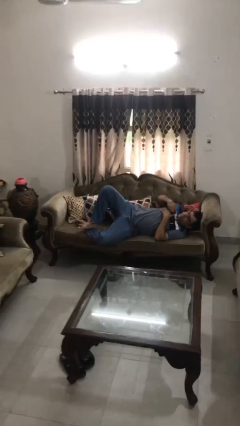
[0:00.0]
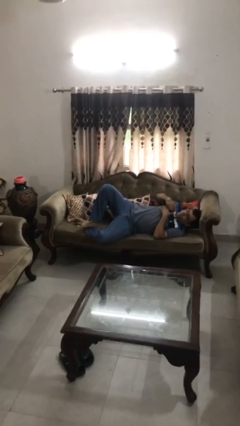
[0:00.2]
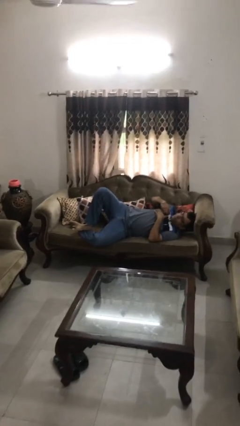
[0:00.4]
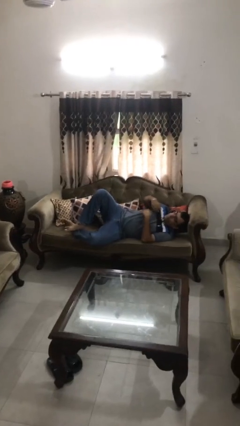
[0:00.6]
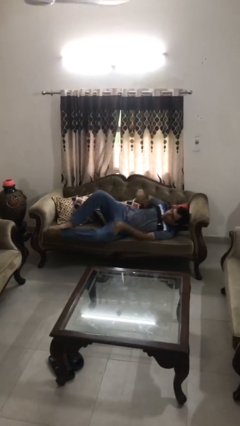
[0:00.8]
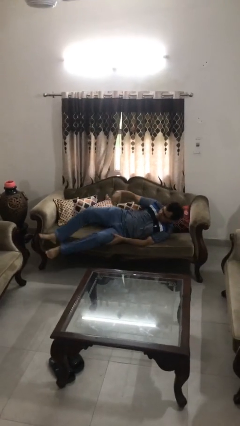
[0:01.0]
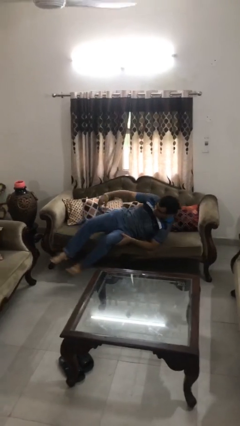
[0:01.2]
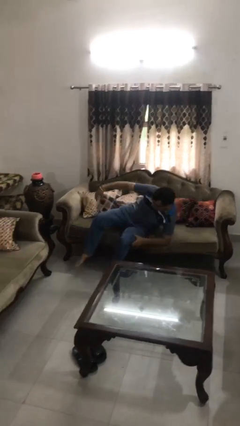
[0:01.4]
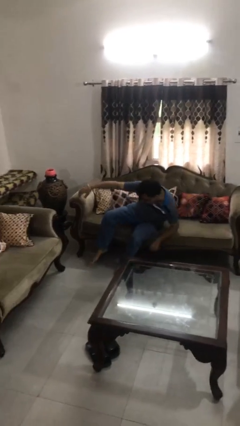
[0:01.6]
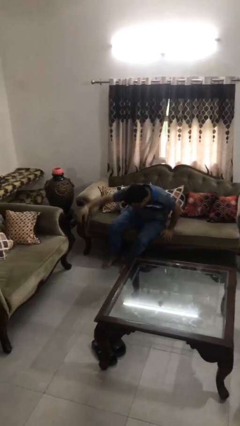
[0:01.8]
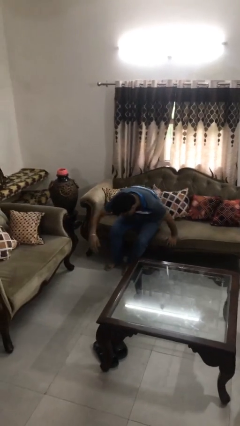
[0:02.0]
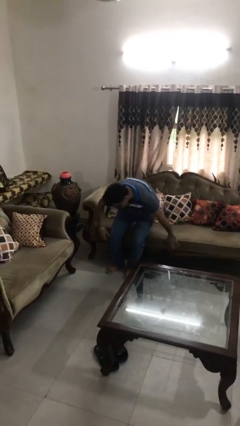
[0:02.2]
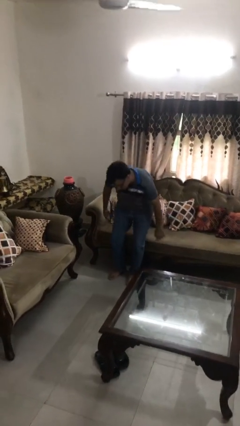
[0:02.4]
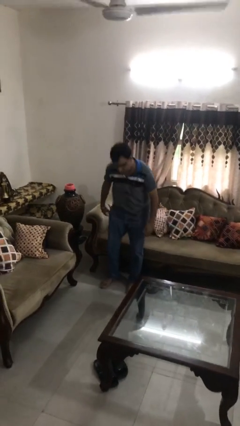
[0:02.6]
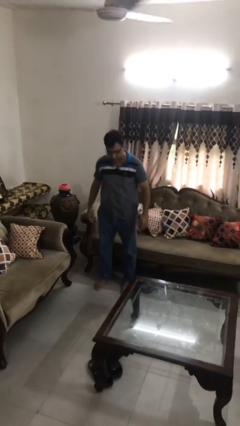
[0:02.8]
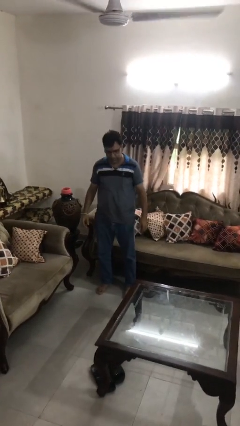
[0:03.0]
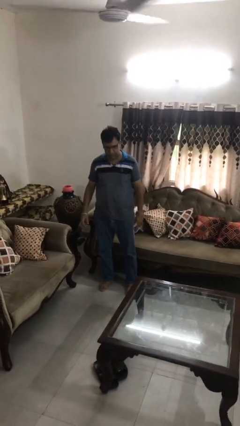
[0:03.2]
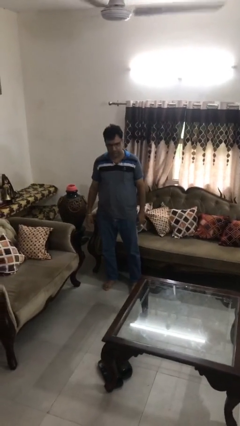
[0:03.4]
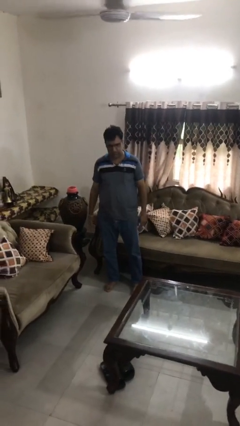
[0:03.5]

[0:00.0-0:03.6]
person stands up

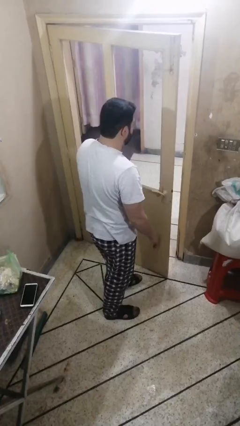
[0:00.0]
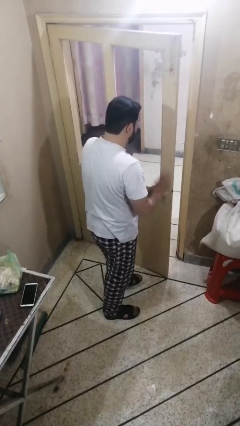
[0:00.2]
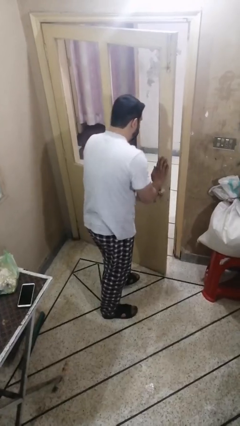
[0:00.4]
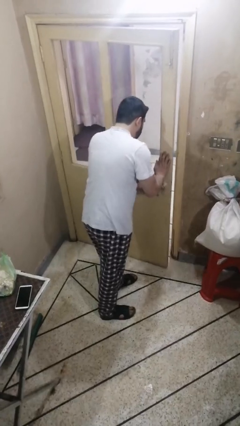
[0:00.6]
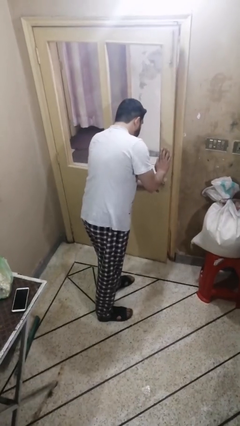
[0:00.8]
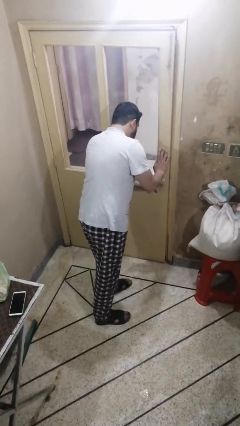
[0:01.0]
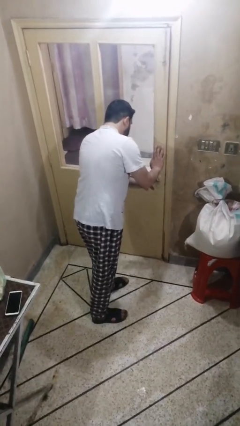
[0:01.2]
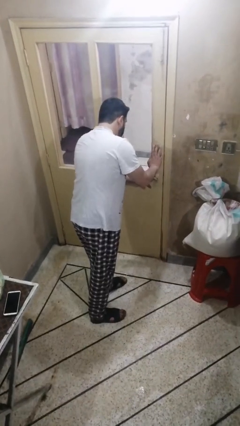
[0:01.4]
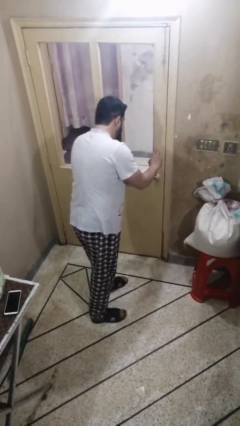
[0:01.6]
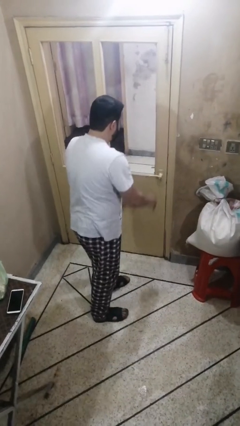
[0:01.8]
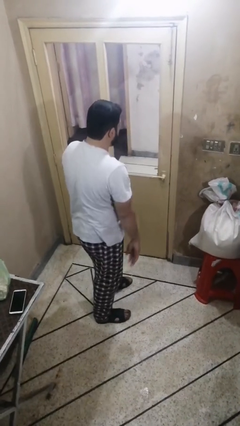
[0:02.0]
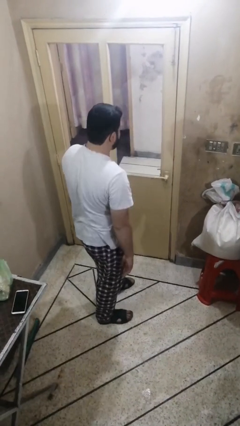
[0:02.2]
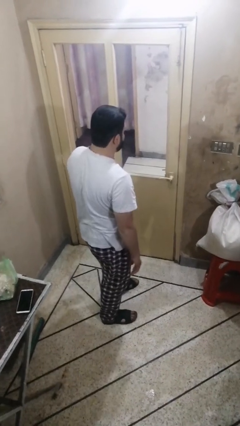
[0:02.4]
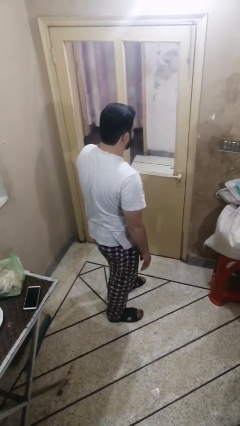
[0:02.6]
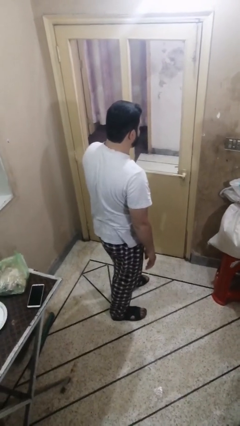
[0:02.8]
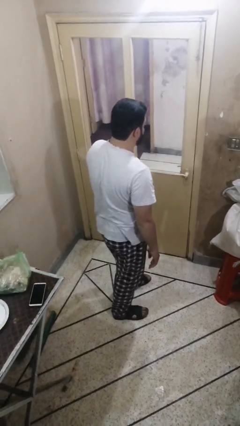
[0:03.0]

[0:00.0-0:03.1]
person closes facility door

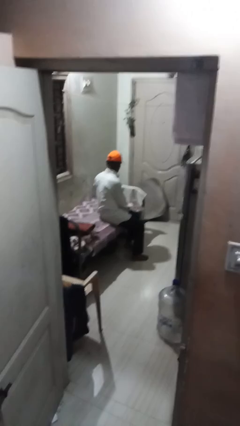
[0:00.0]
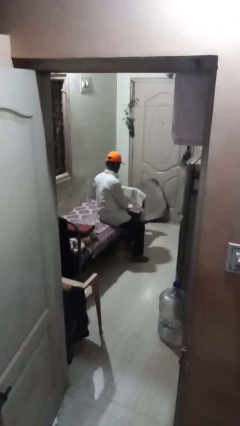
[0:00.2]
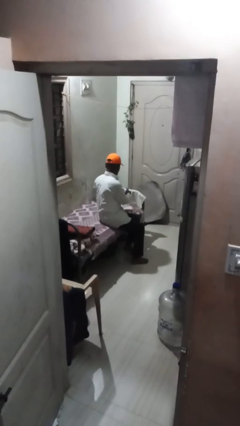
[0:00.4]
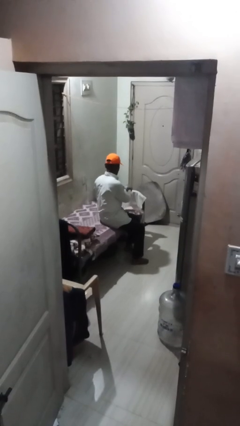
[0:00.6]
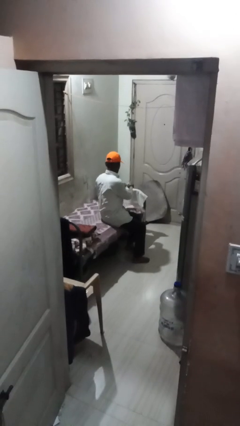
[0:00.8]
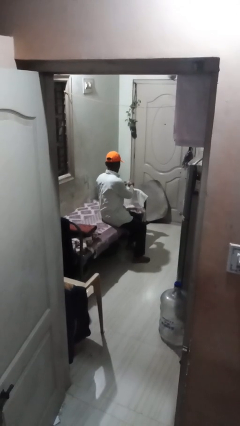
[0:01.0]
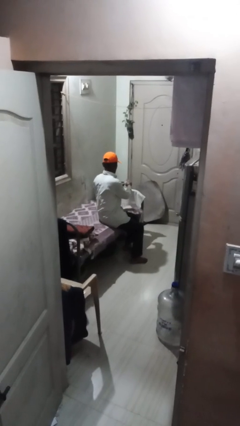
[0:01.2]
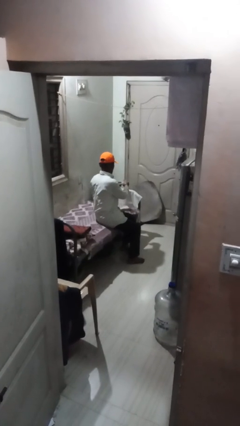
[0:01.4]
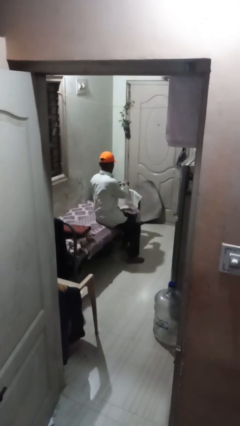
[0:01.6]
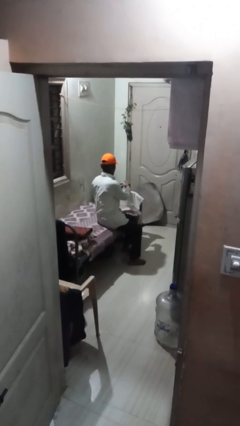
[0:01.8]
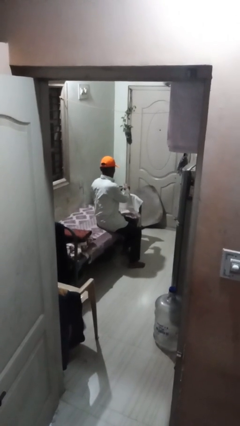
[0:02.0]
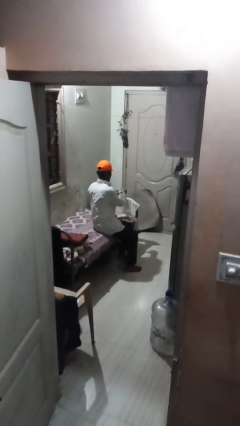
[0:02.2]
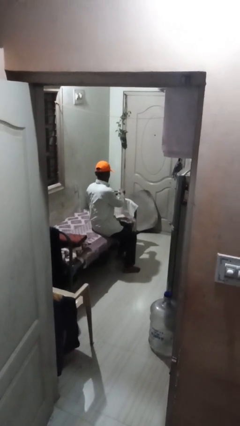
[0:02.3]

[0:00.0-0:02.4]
person clips fingernails

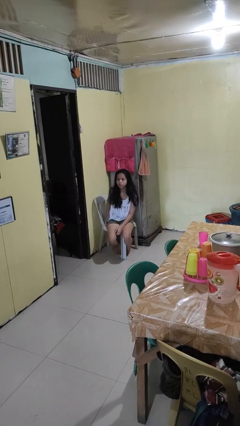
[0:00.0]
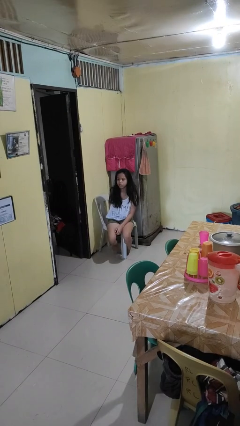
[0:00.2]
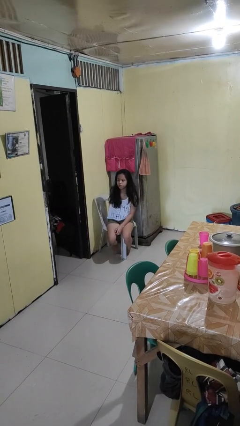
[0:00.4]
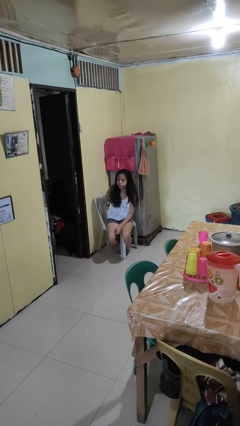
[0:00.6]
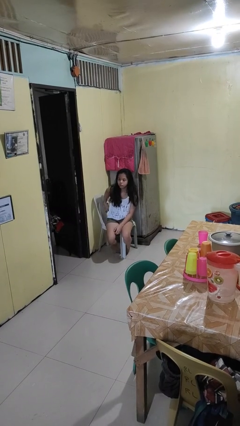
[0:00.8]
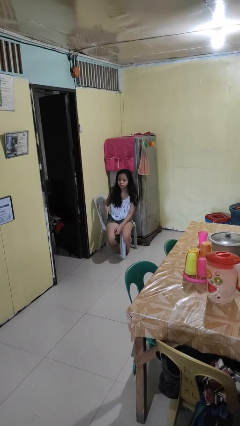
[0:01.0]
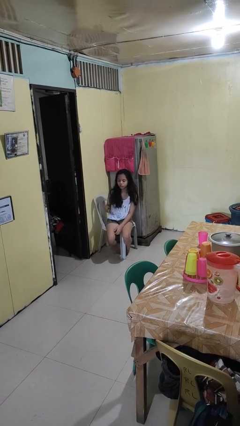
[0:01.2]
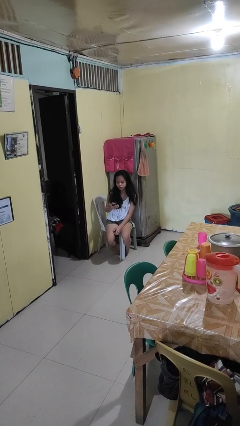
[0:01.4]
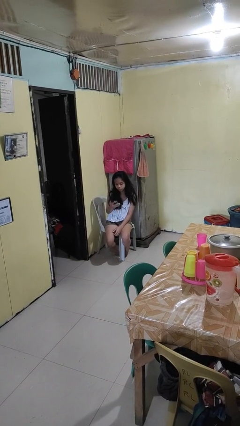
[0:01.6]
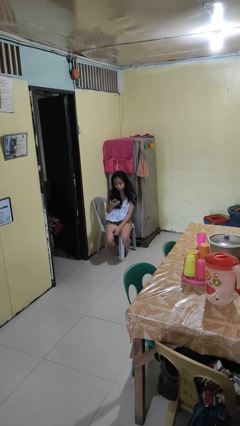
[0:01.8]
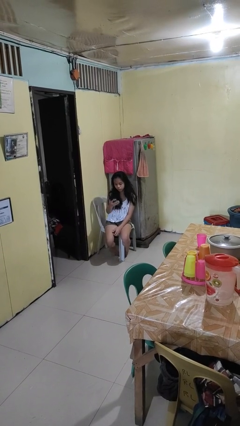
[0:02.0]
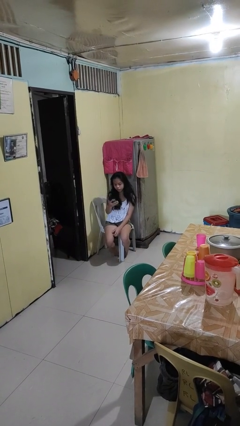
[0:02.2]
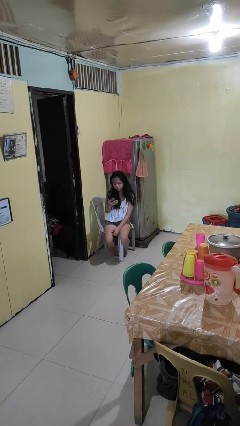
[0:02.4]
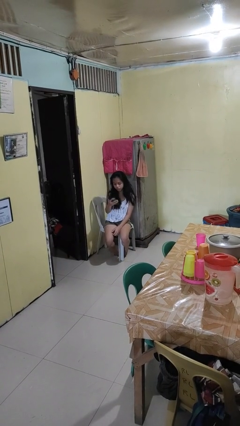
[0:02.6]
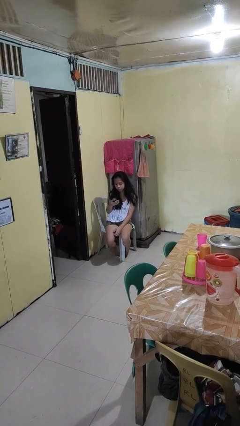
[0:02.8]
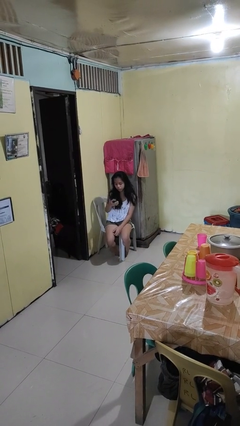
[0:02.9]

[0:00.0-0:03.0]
person takes phone from pocket

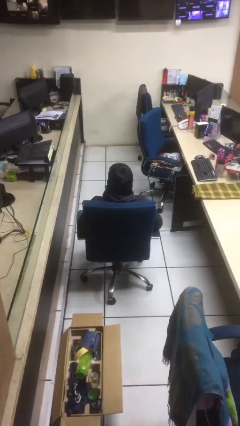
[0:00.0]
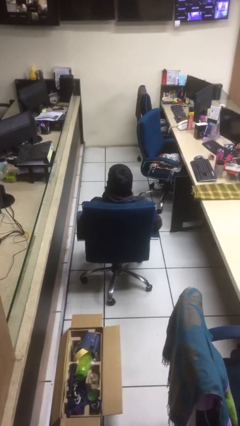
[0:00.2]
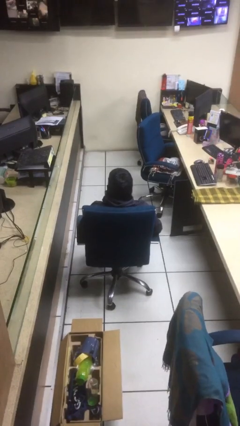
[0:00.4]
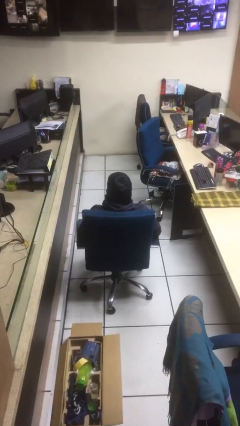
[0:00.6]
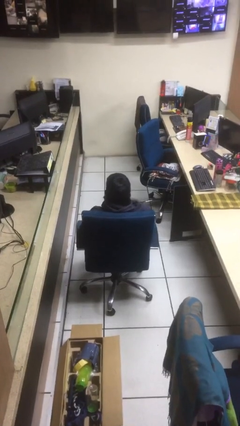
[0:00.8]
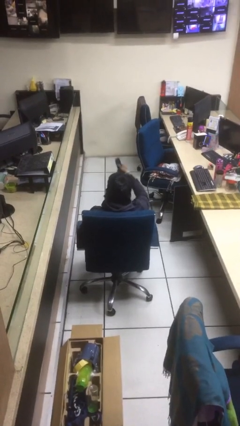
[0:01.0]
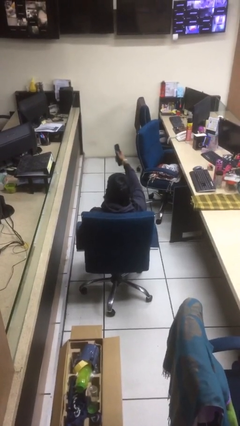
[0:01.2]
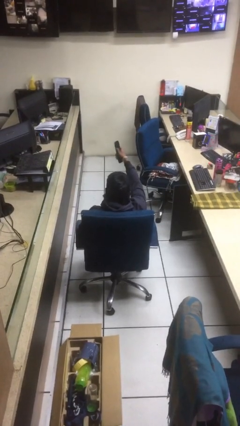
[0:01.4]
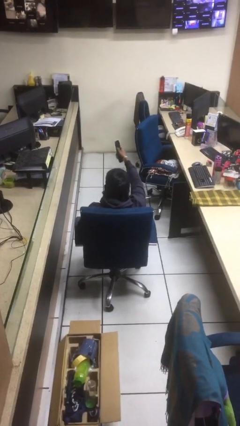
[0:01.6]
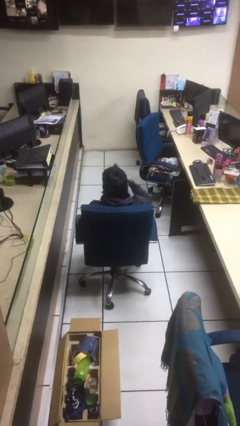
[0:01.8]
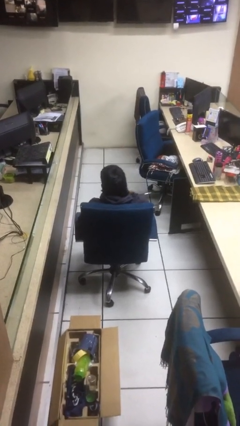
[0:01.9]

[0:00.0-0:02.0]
person uses television remote

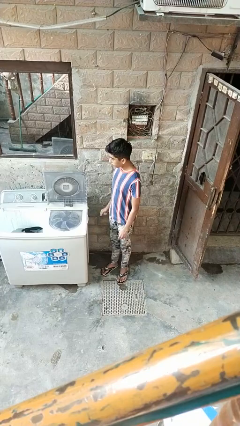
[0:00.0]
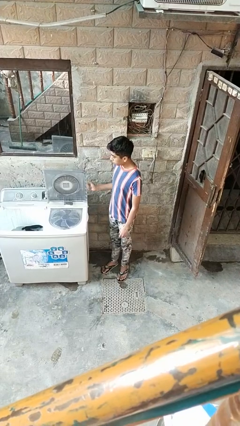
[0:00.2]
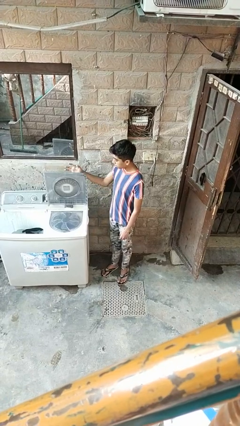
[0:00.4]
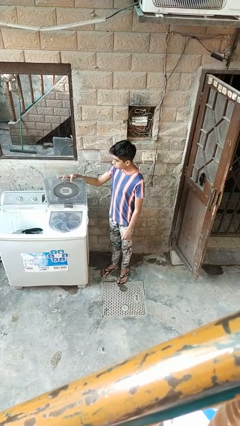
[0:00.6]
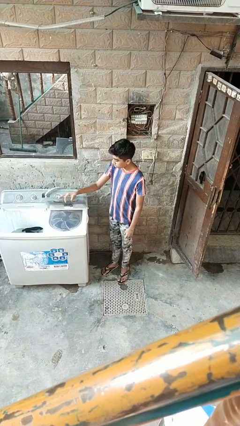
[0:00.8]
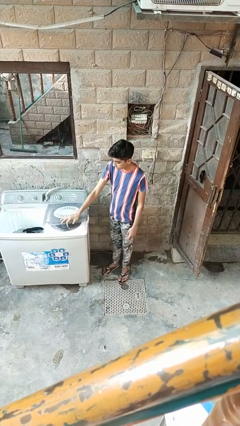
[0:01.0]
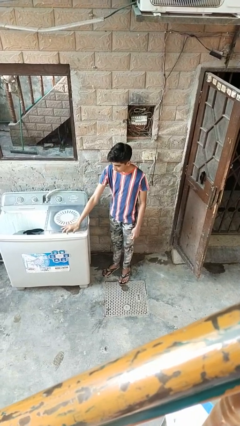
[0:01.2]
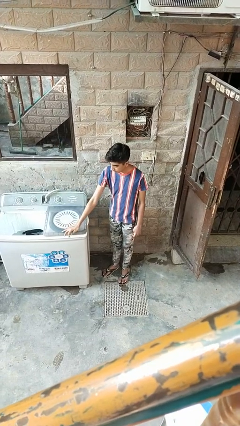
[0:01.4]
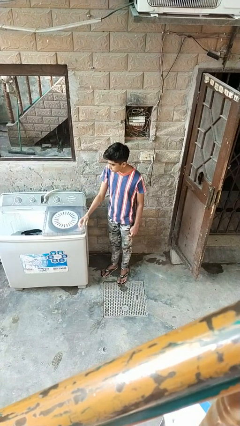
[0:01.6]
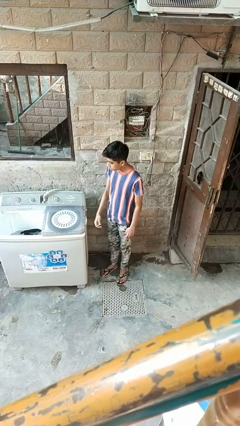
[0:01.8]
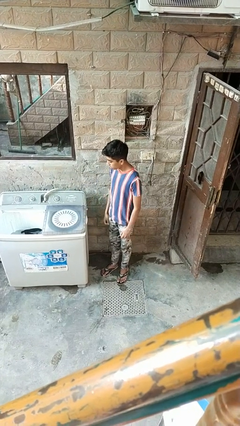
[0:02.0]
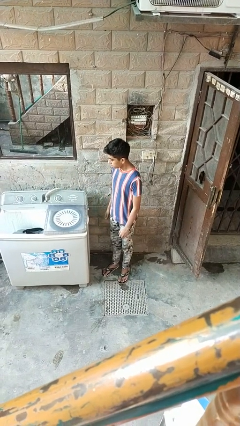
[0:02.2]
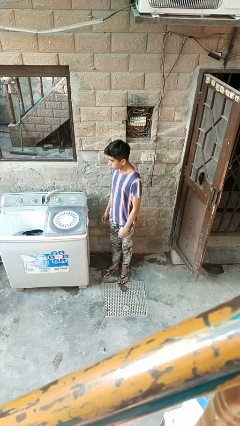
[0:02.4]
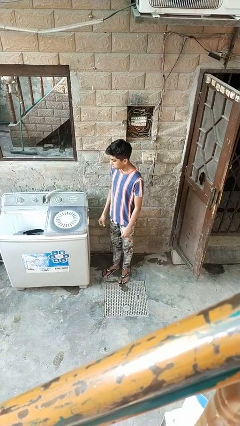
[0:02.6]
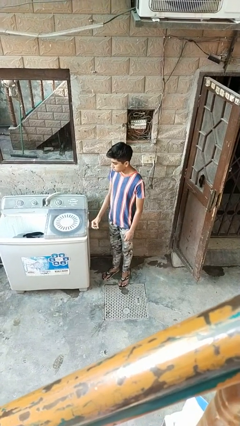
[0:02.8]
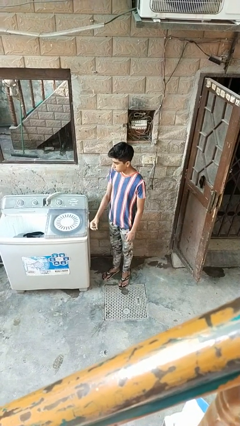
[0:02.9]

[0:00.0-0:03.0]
person closes clothes washer

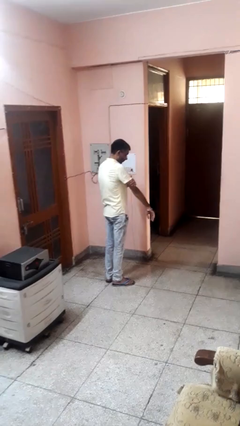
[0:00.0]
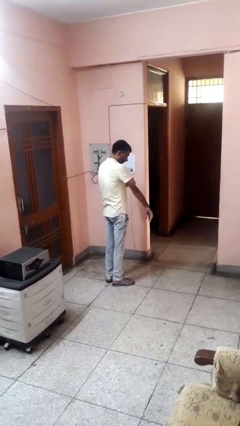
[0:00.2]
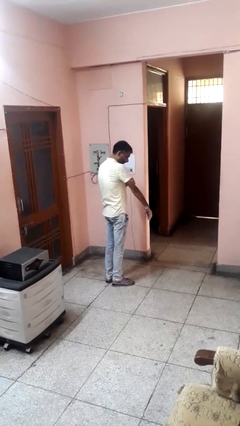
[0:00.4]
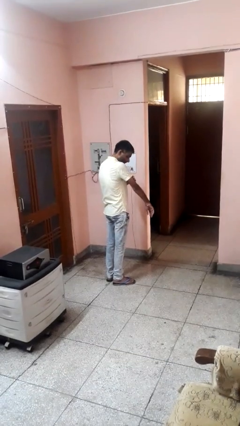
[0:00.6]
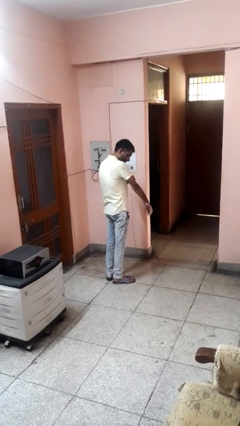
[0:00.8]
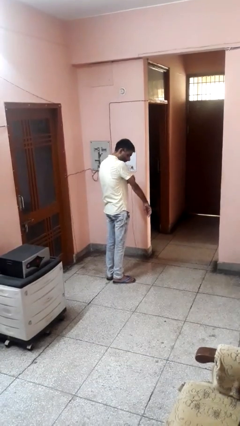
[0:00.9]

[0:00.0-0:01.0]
person swats bug
